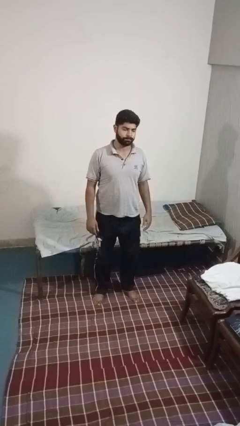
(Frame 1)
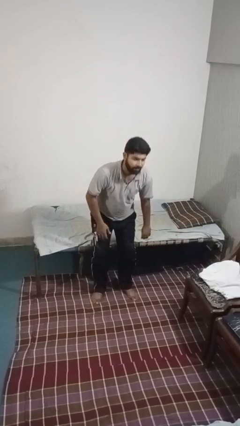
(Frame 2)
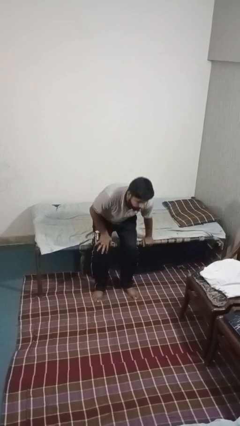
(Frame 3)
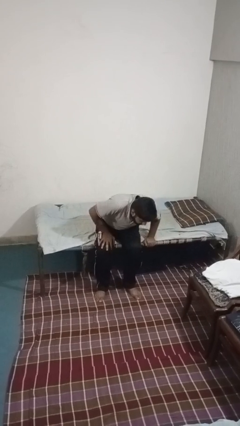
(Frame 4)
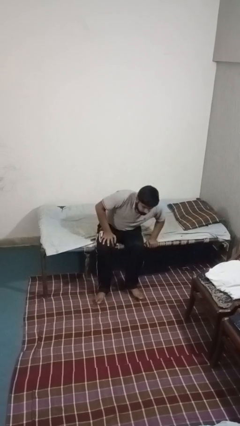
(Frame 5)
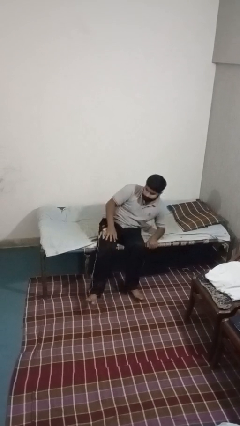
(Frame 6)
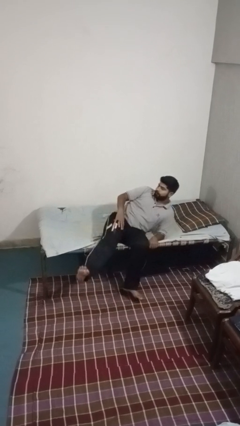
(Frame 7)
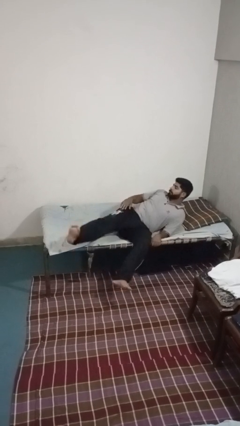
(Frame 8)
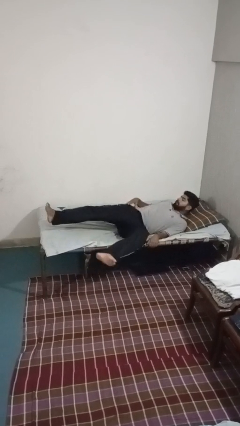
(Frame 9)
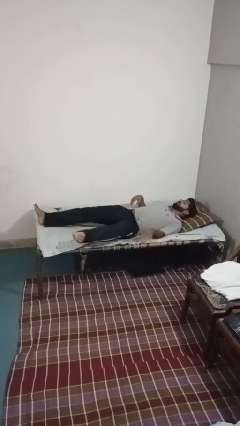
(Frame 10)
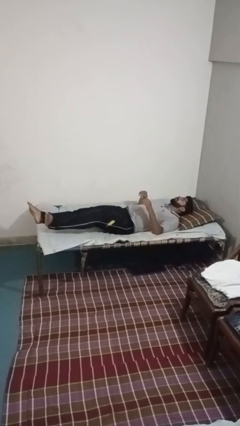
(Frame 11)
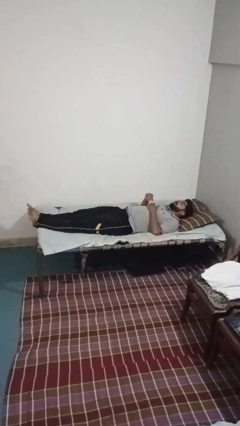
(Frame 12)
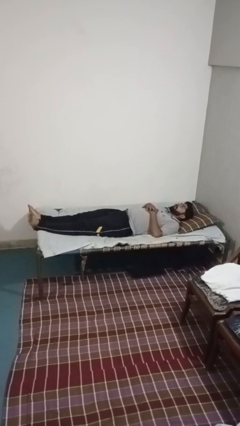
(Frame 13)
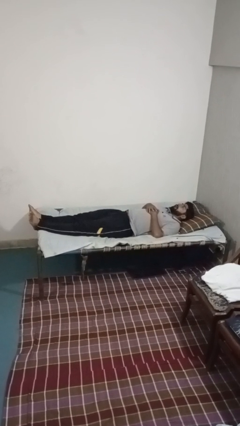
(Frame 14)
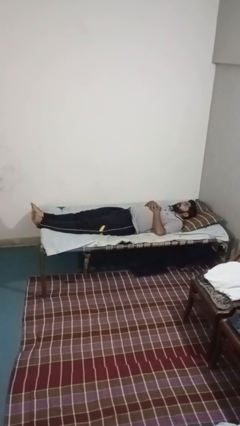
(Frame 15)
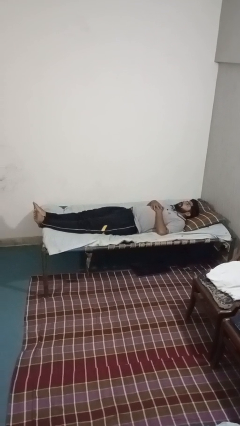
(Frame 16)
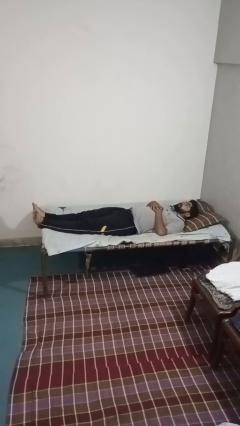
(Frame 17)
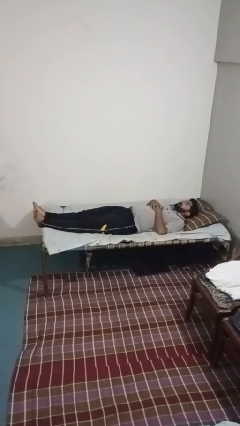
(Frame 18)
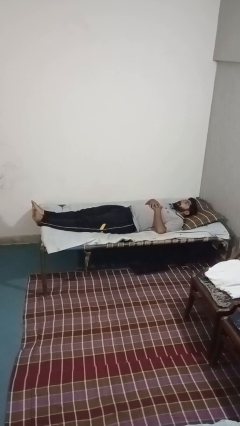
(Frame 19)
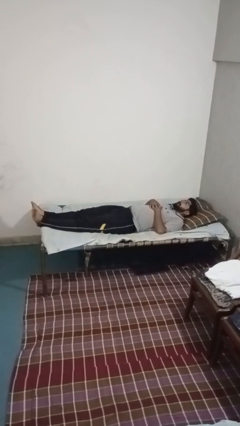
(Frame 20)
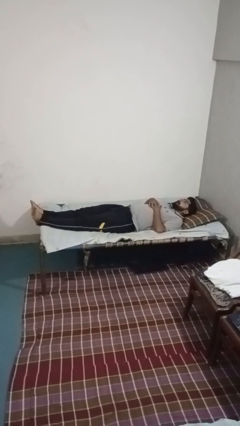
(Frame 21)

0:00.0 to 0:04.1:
person lies down on bed

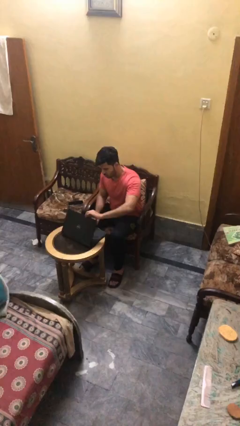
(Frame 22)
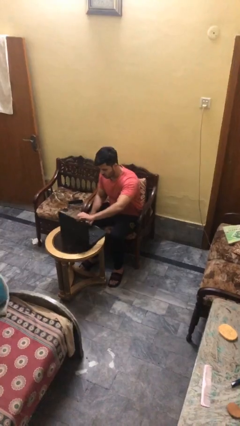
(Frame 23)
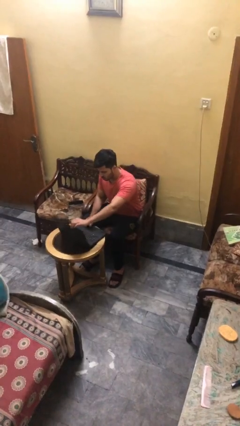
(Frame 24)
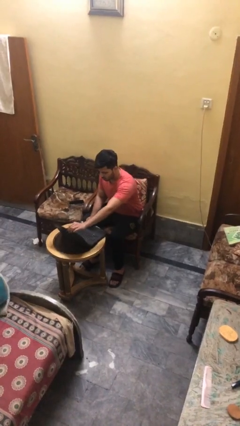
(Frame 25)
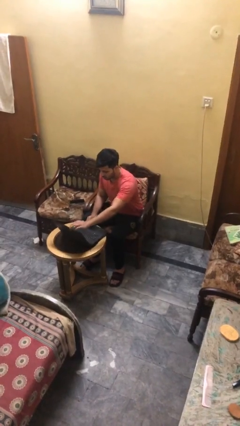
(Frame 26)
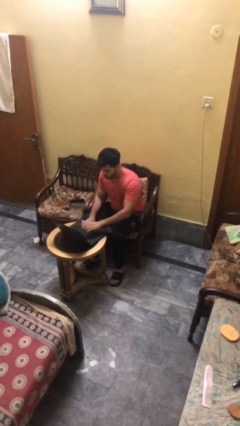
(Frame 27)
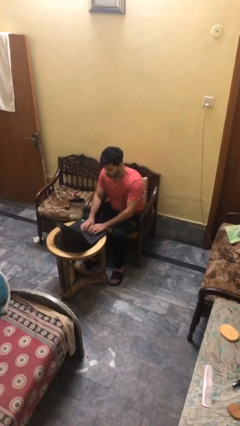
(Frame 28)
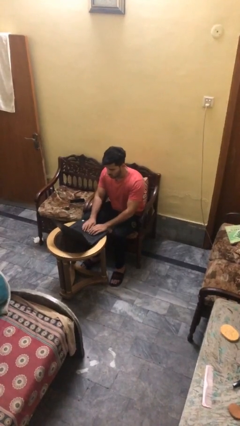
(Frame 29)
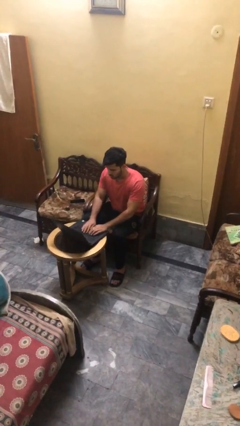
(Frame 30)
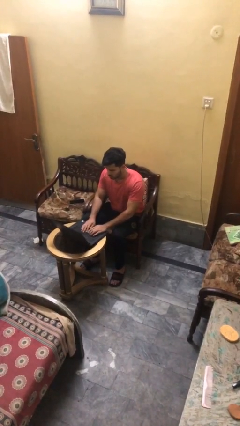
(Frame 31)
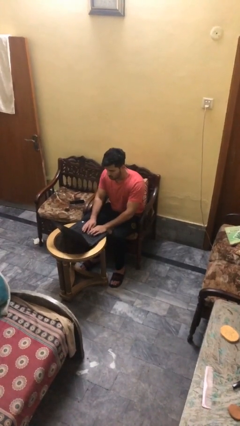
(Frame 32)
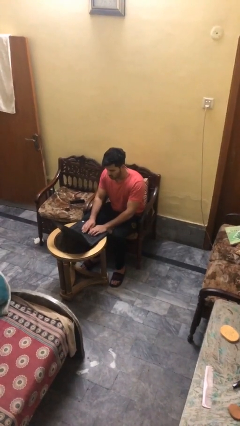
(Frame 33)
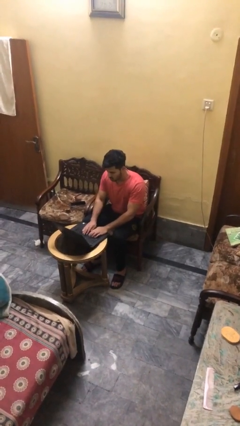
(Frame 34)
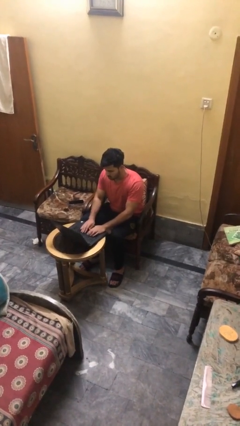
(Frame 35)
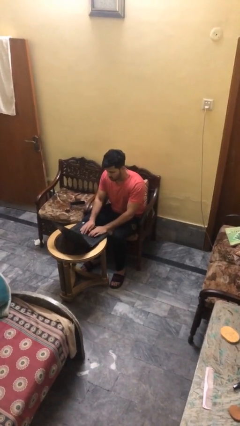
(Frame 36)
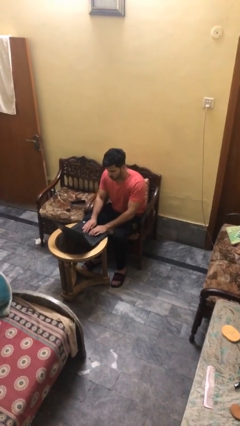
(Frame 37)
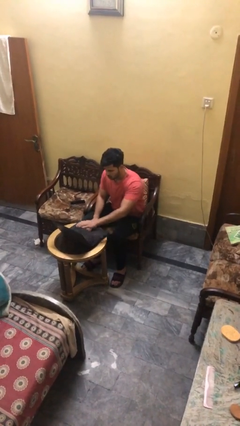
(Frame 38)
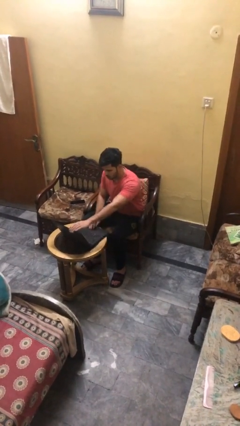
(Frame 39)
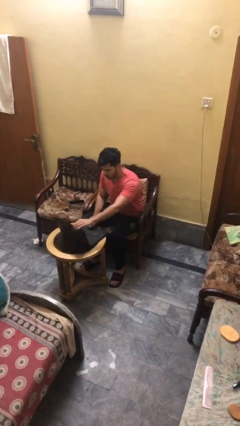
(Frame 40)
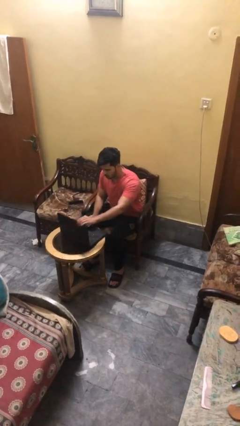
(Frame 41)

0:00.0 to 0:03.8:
person interacts with laptop

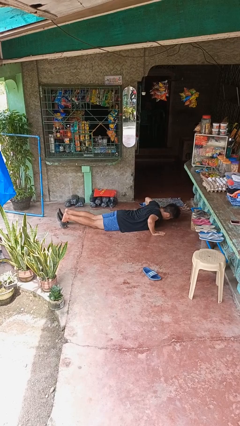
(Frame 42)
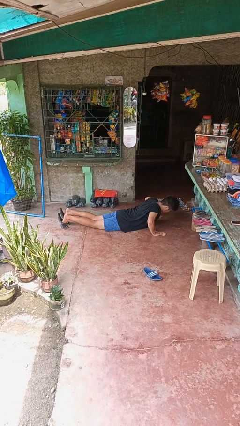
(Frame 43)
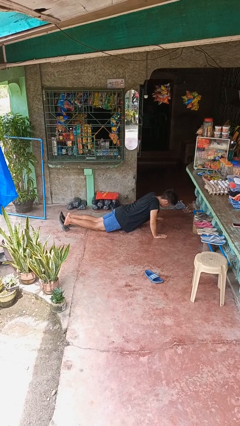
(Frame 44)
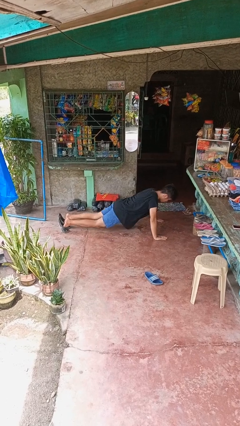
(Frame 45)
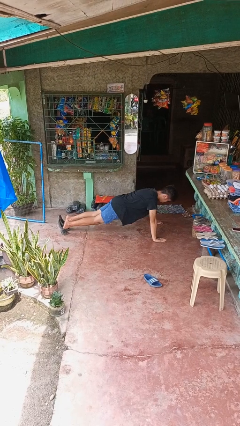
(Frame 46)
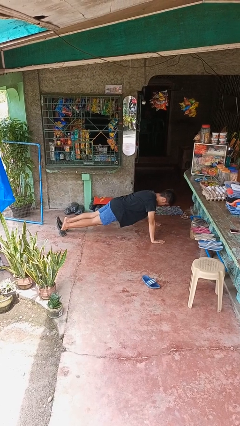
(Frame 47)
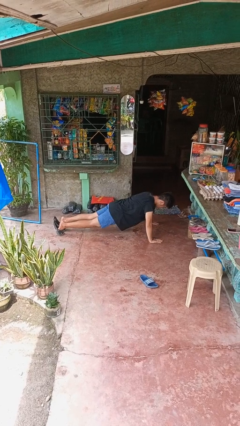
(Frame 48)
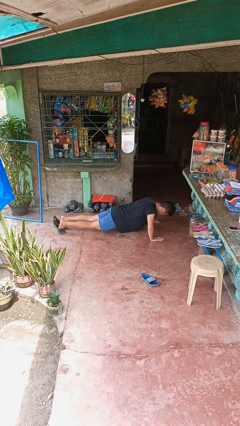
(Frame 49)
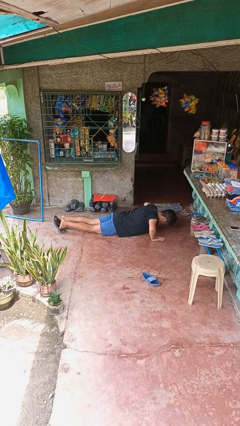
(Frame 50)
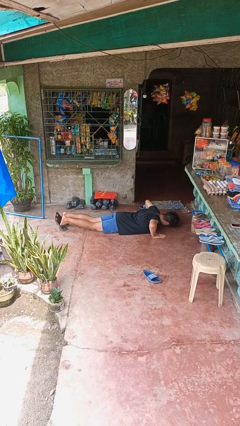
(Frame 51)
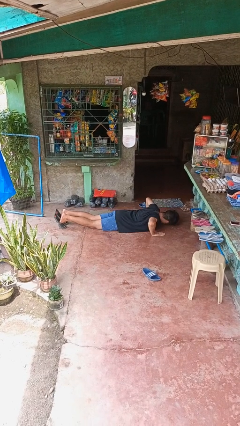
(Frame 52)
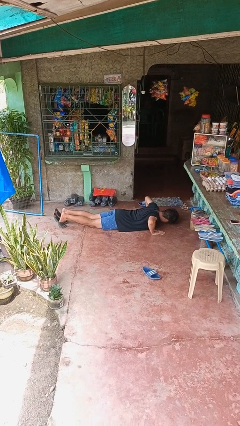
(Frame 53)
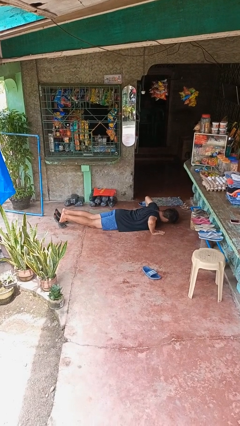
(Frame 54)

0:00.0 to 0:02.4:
person exercises with pushup

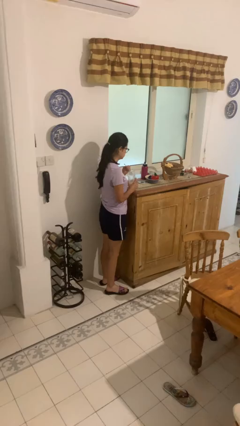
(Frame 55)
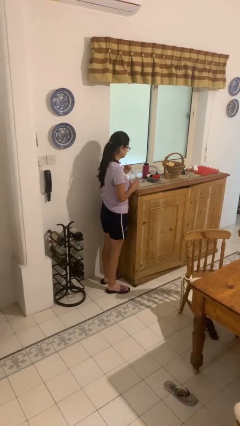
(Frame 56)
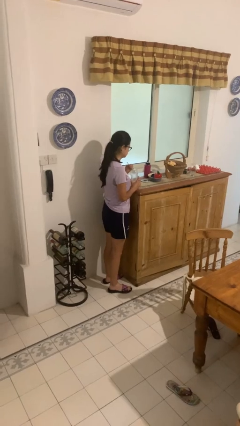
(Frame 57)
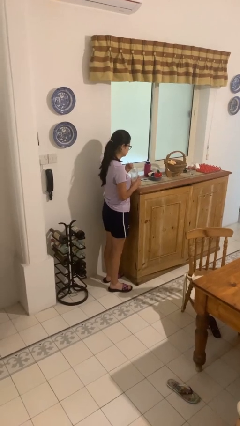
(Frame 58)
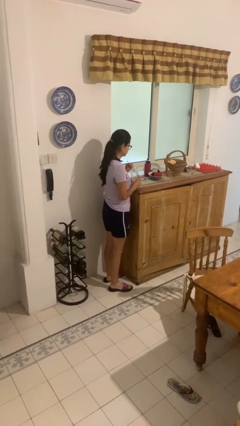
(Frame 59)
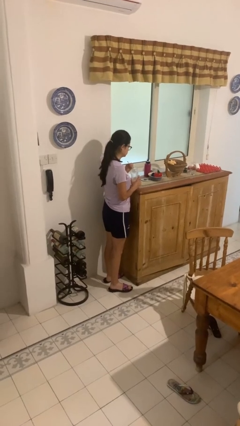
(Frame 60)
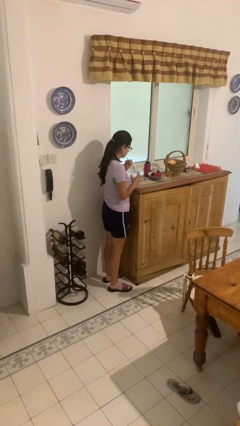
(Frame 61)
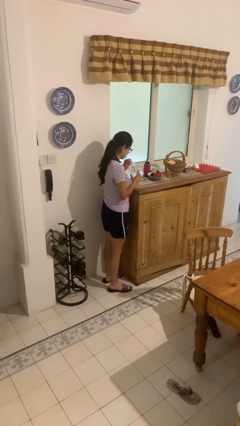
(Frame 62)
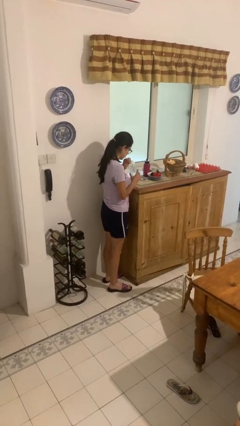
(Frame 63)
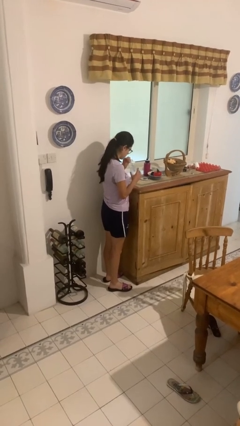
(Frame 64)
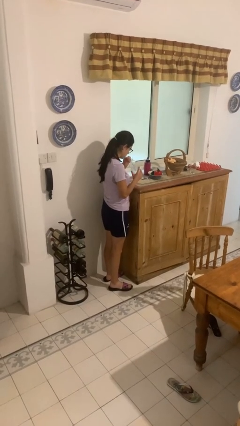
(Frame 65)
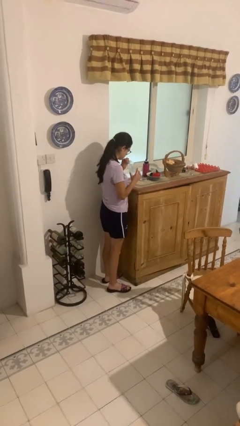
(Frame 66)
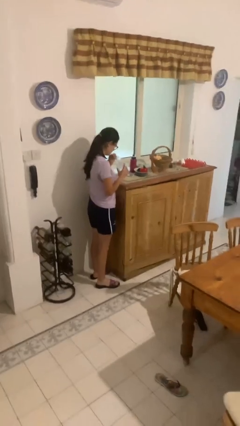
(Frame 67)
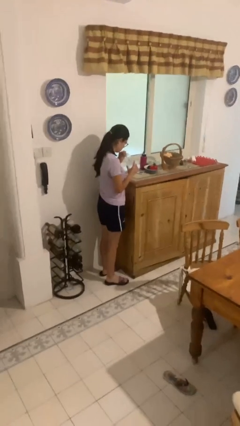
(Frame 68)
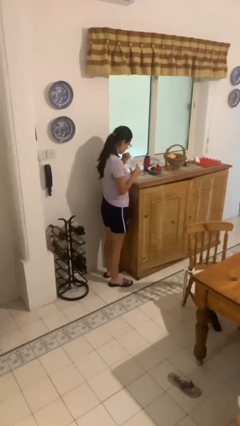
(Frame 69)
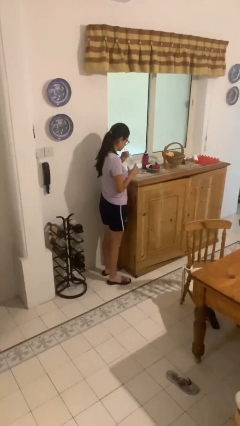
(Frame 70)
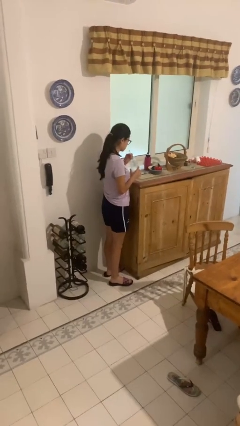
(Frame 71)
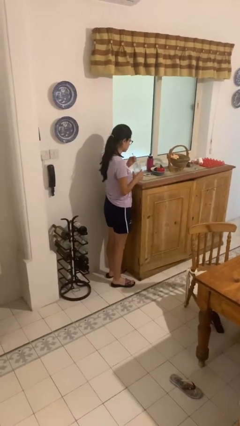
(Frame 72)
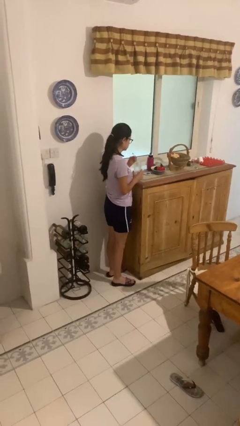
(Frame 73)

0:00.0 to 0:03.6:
person drinks from straw

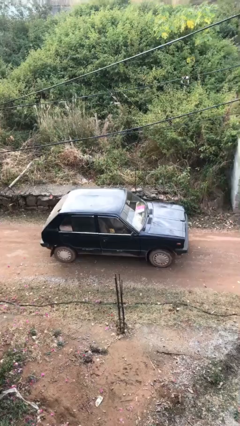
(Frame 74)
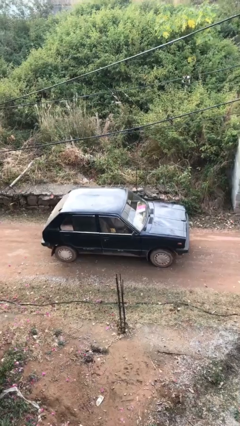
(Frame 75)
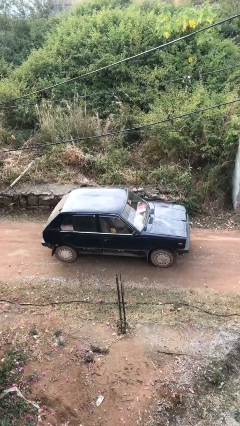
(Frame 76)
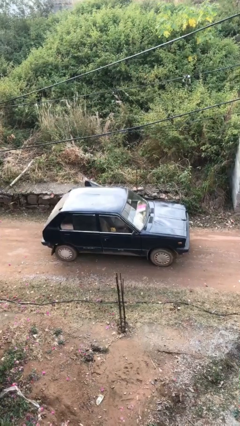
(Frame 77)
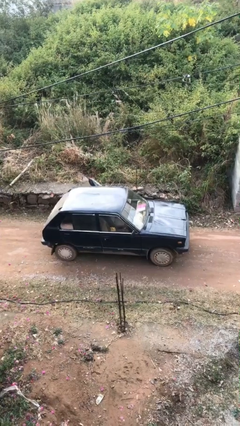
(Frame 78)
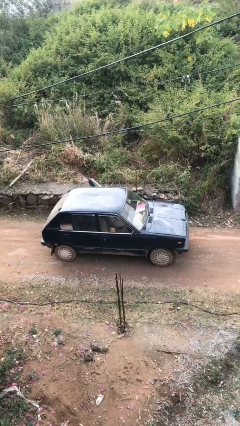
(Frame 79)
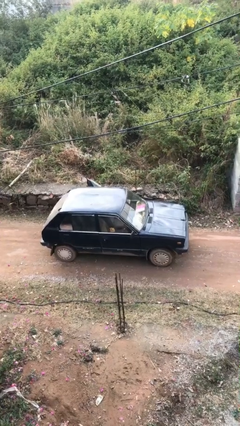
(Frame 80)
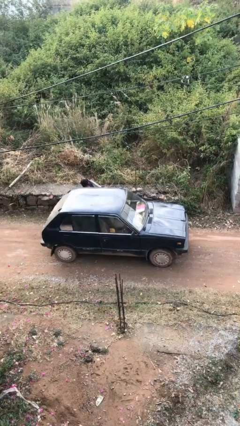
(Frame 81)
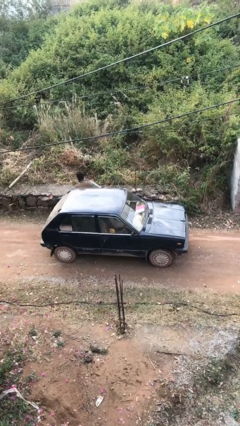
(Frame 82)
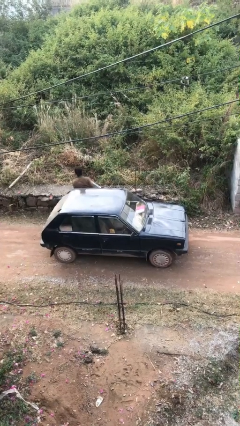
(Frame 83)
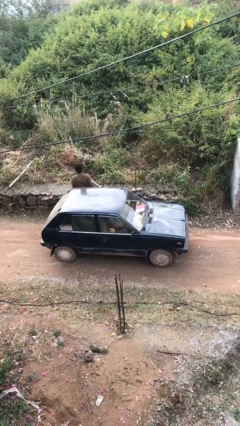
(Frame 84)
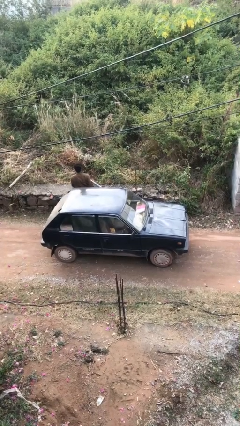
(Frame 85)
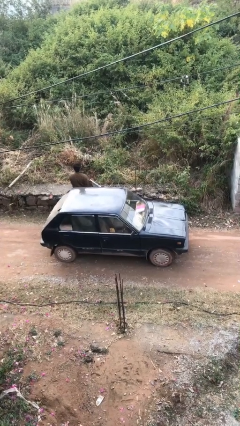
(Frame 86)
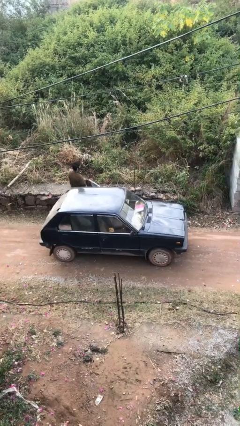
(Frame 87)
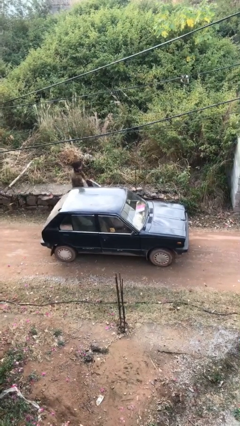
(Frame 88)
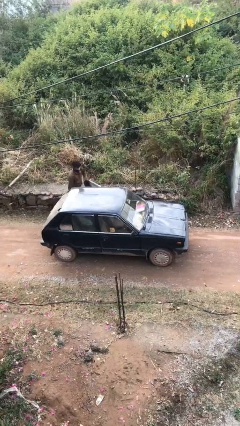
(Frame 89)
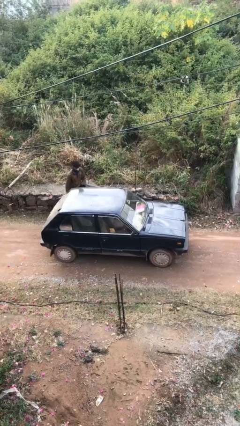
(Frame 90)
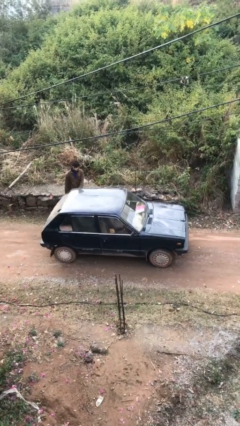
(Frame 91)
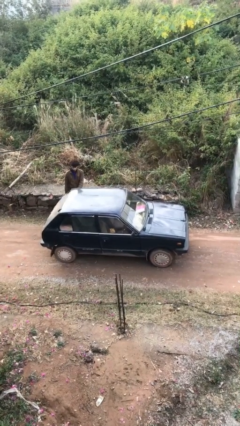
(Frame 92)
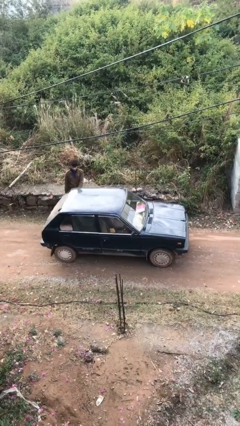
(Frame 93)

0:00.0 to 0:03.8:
car drops off person
